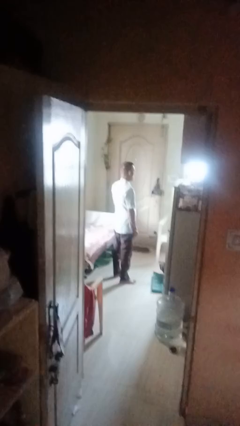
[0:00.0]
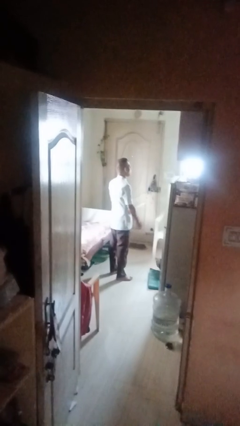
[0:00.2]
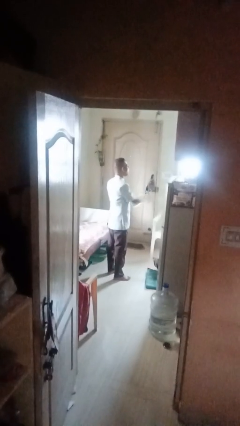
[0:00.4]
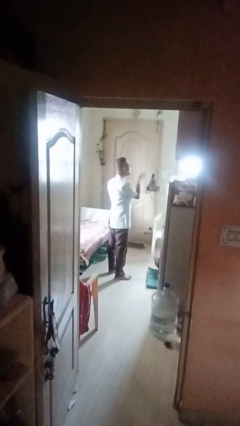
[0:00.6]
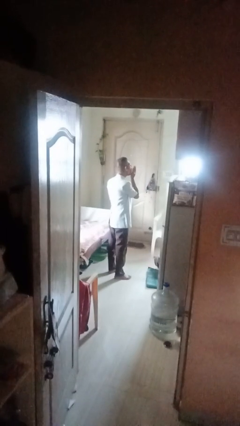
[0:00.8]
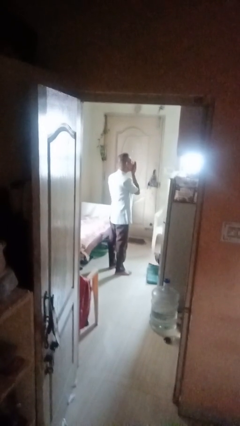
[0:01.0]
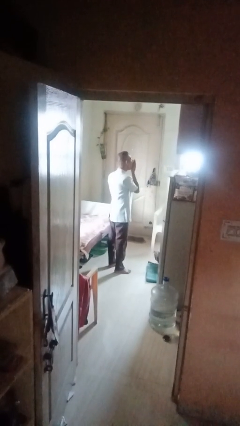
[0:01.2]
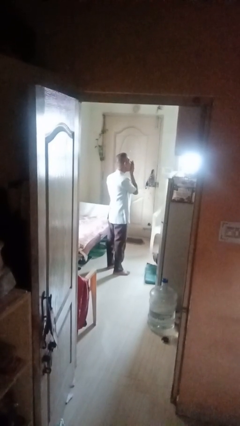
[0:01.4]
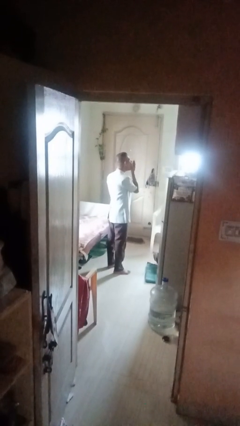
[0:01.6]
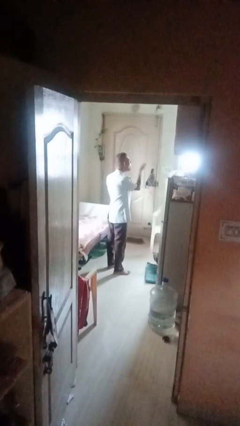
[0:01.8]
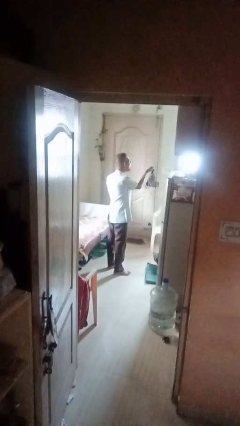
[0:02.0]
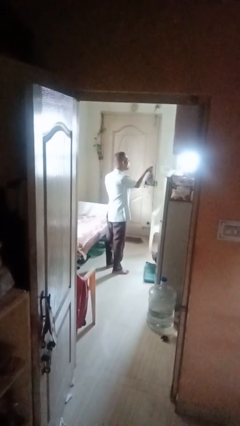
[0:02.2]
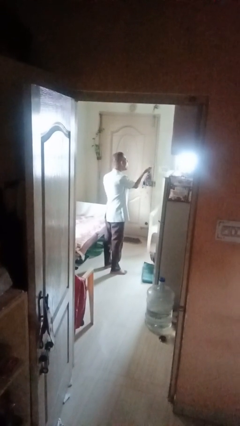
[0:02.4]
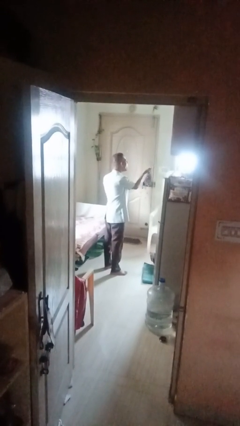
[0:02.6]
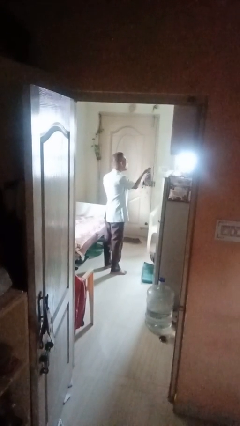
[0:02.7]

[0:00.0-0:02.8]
person gestures blow kiss

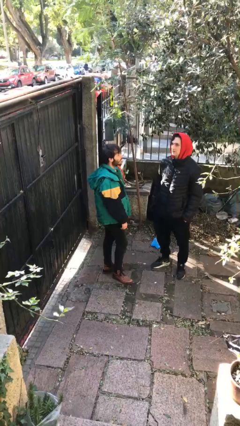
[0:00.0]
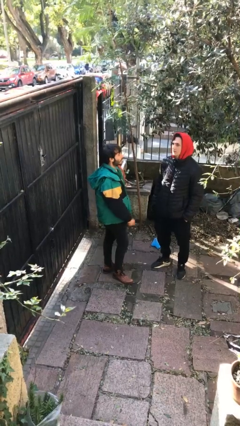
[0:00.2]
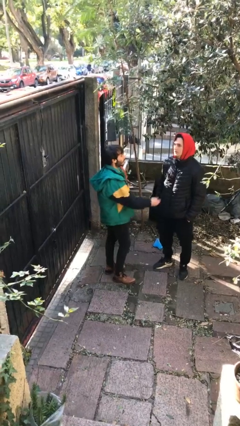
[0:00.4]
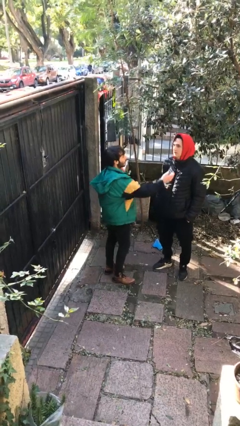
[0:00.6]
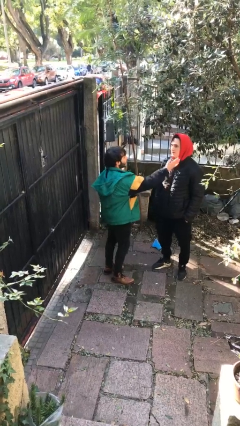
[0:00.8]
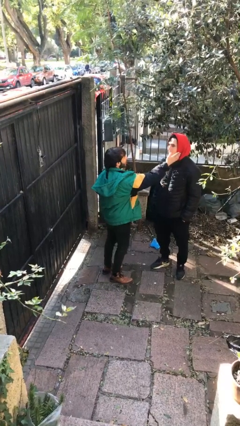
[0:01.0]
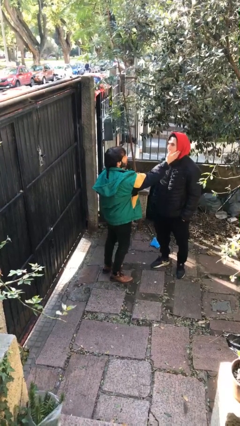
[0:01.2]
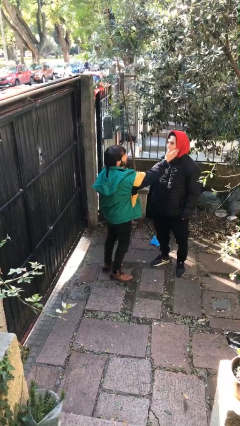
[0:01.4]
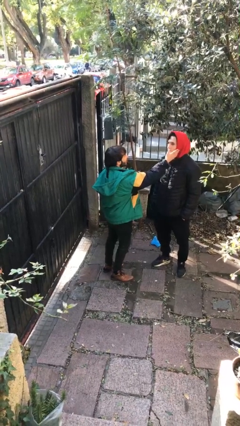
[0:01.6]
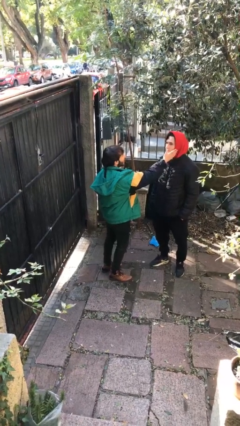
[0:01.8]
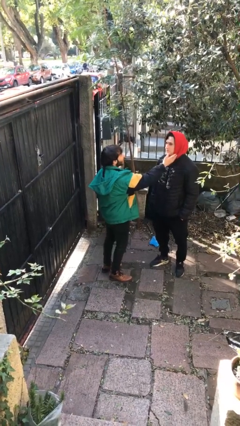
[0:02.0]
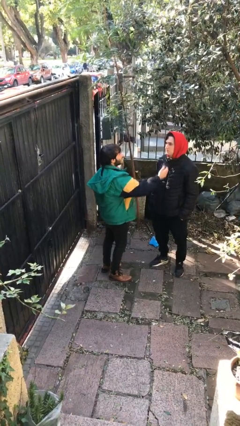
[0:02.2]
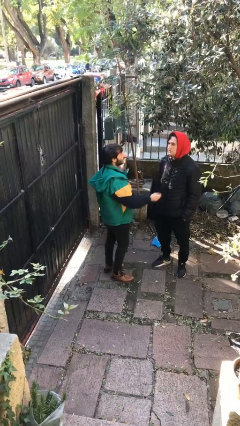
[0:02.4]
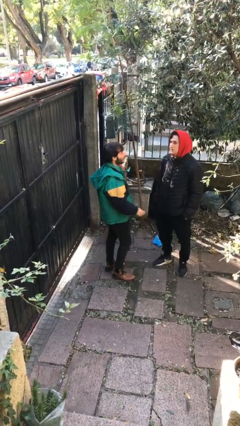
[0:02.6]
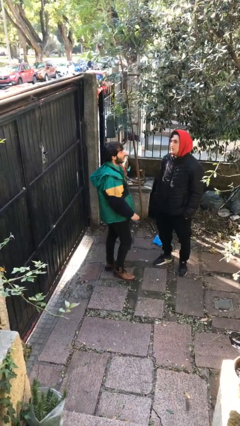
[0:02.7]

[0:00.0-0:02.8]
person touches face of person

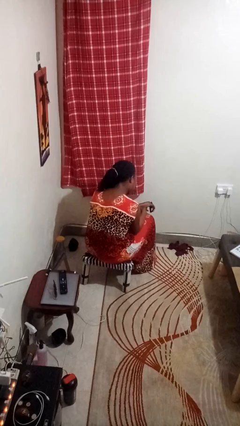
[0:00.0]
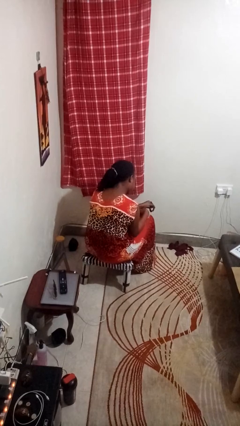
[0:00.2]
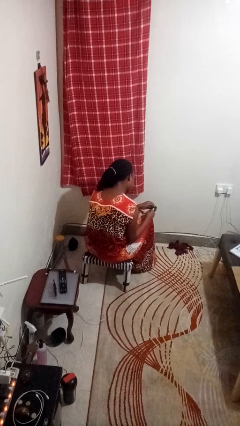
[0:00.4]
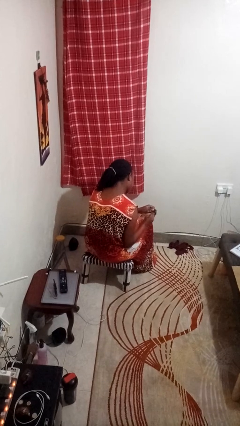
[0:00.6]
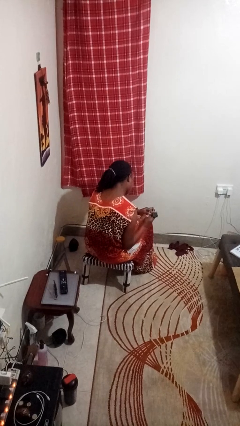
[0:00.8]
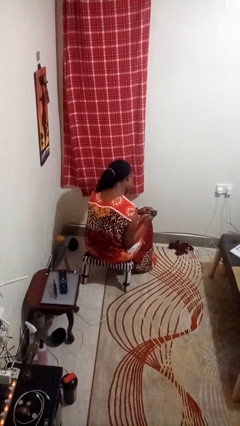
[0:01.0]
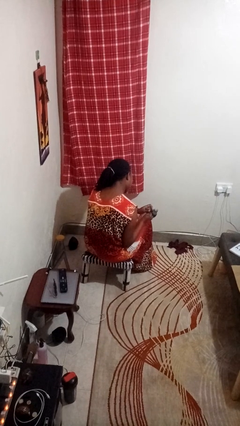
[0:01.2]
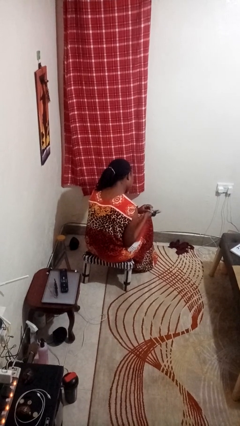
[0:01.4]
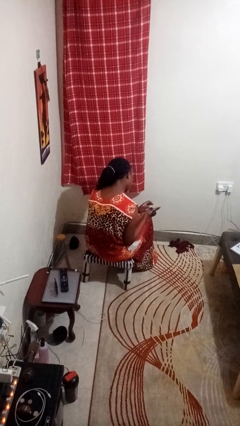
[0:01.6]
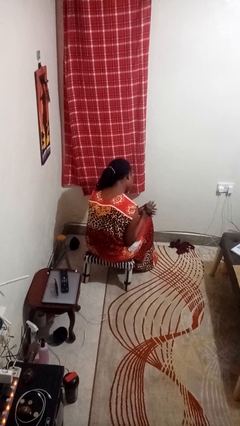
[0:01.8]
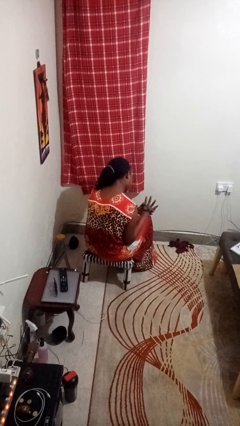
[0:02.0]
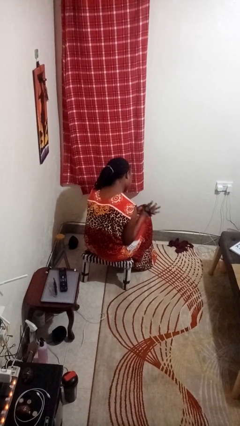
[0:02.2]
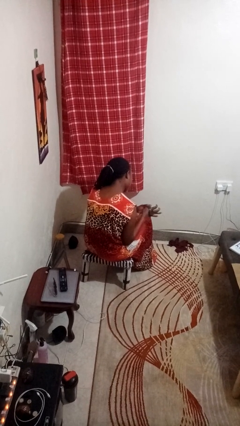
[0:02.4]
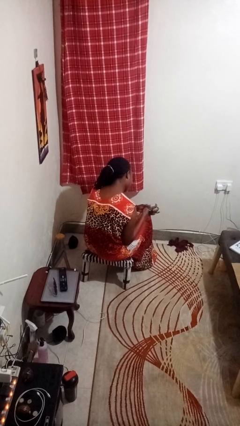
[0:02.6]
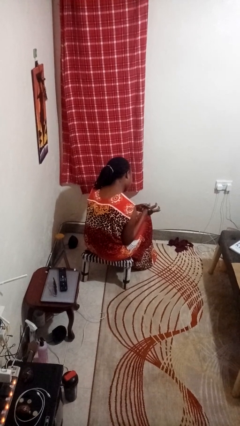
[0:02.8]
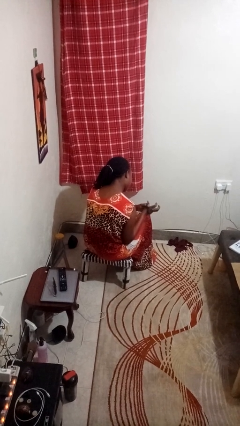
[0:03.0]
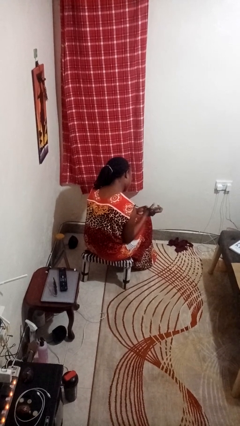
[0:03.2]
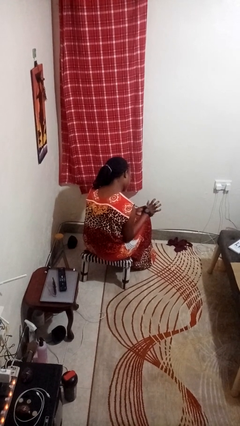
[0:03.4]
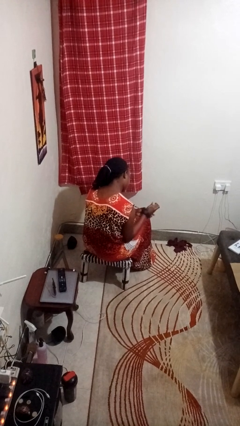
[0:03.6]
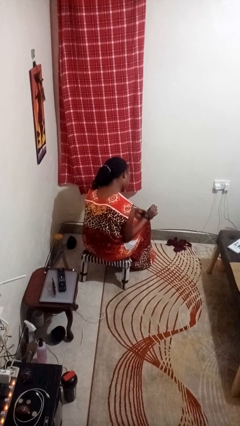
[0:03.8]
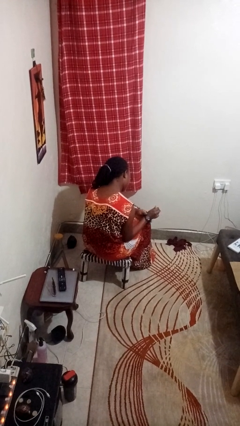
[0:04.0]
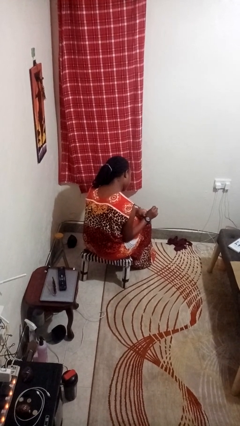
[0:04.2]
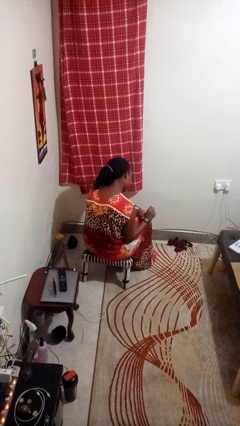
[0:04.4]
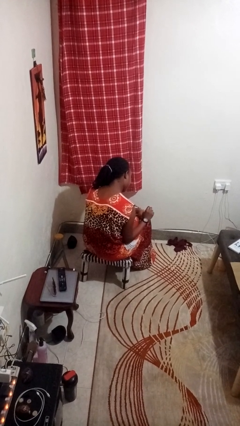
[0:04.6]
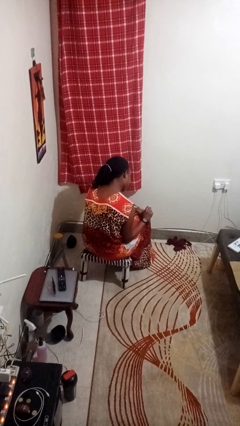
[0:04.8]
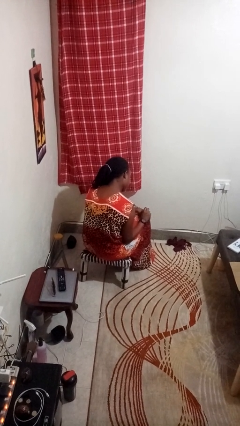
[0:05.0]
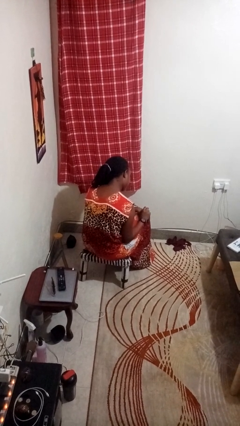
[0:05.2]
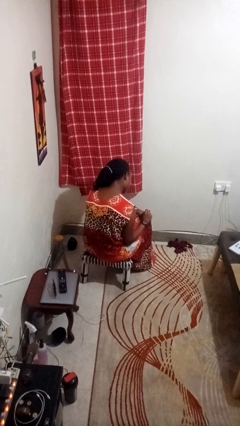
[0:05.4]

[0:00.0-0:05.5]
person puts on wristwatch

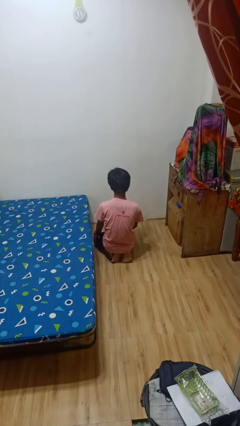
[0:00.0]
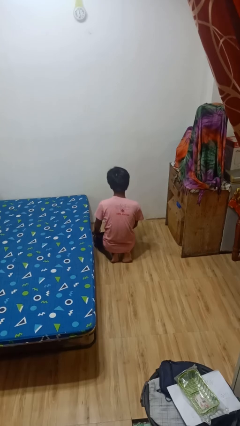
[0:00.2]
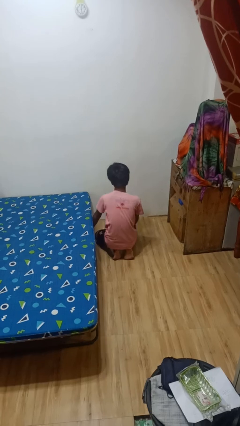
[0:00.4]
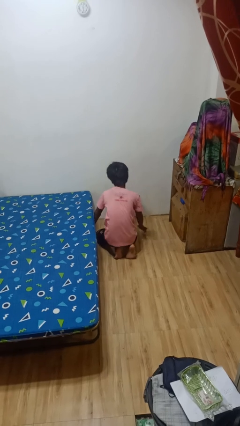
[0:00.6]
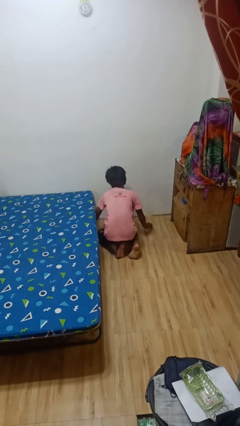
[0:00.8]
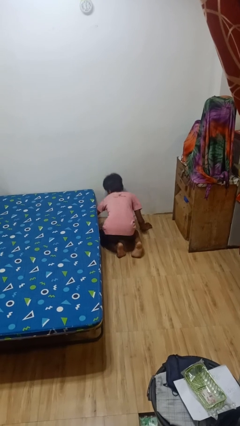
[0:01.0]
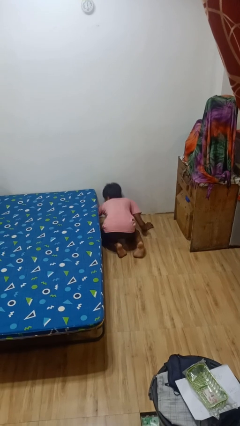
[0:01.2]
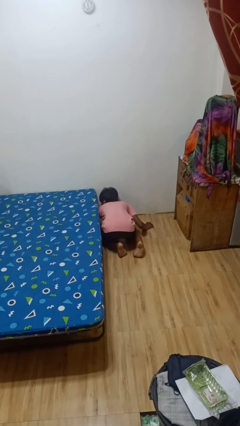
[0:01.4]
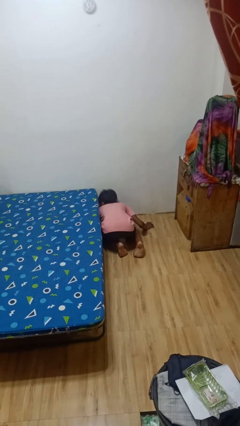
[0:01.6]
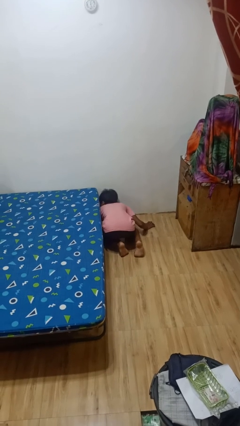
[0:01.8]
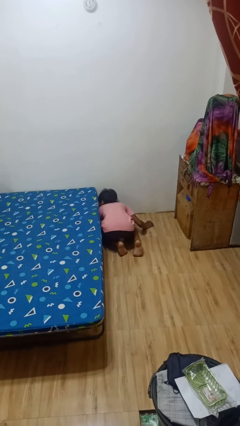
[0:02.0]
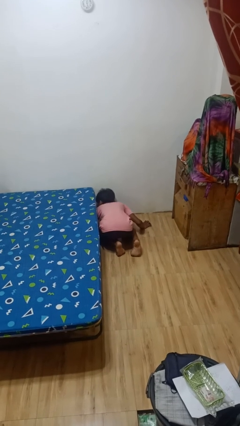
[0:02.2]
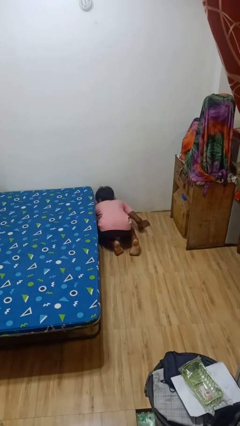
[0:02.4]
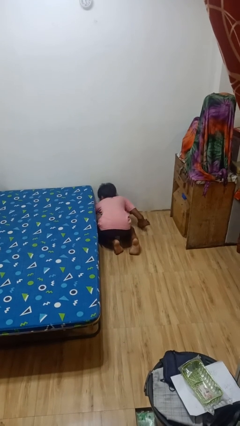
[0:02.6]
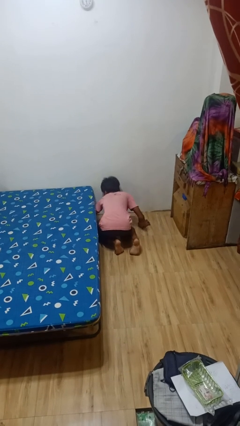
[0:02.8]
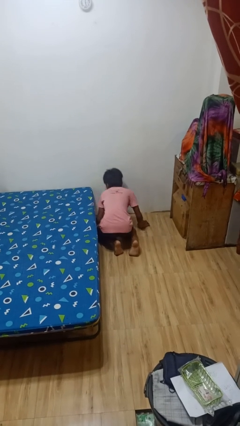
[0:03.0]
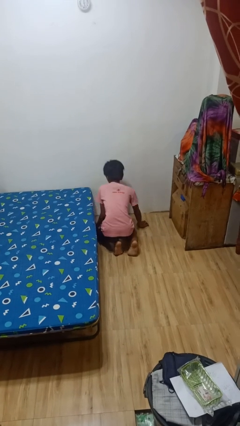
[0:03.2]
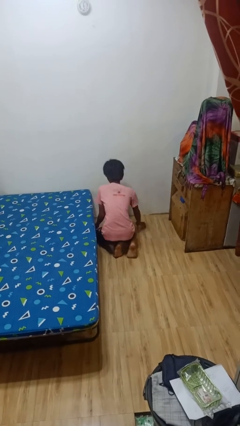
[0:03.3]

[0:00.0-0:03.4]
person searches under bed

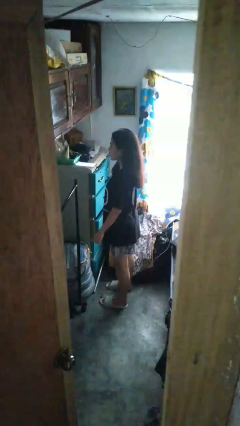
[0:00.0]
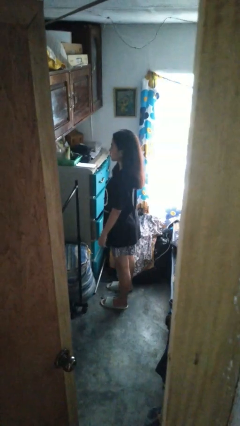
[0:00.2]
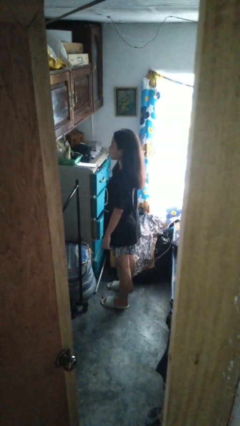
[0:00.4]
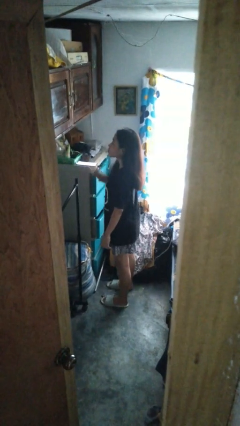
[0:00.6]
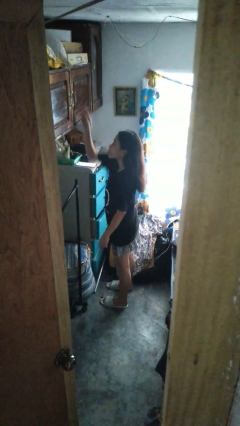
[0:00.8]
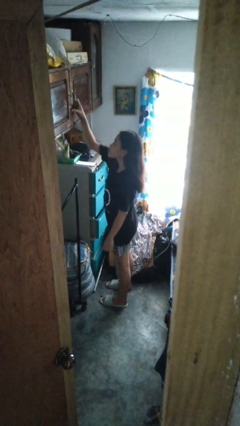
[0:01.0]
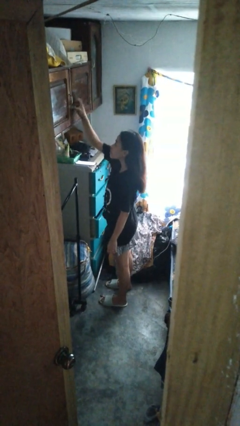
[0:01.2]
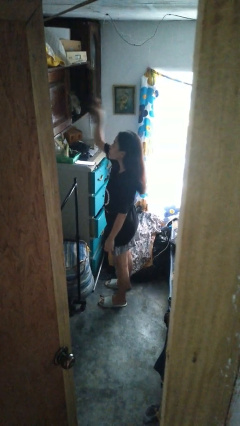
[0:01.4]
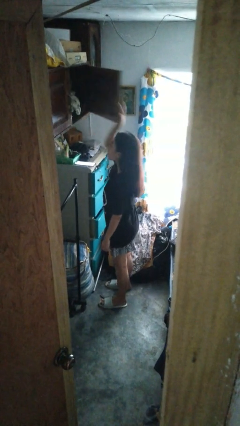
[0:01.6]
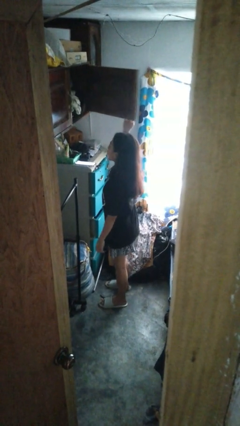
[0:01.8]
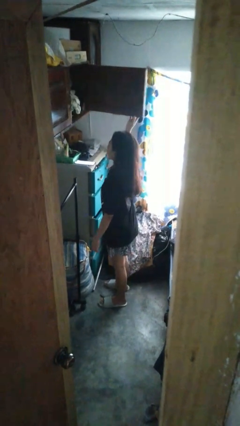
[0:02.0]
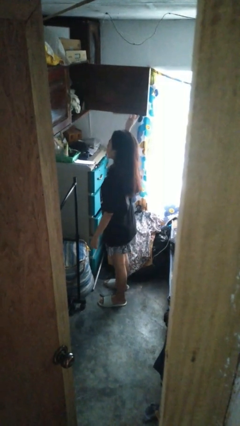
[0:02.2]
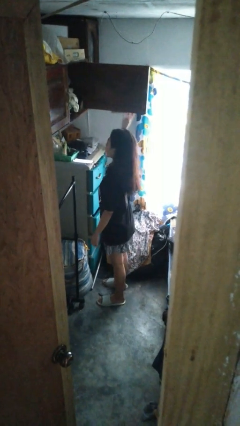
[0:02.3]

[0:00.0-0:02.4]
person opens closet door

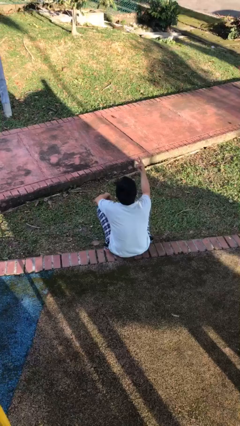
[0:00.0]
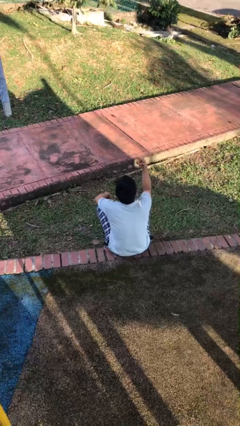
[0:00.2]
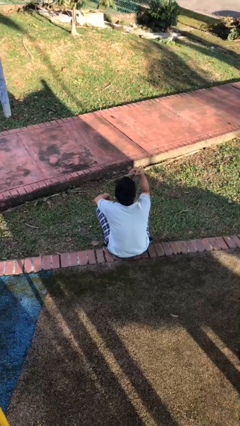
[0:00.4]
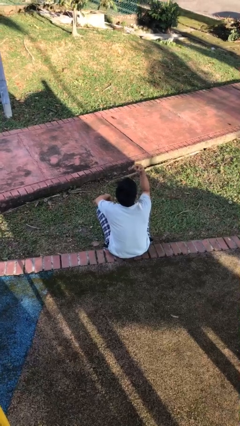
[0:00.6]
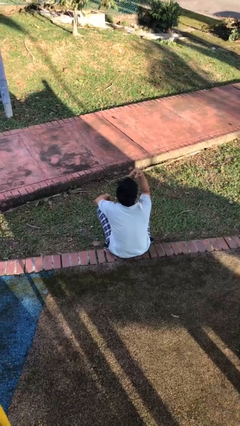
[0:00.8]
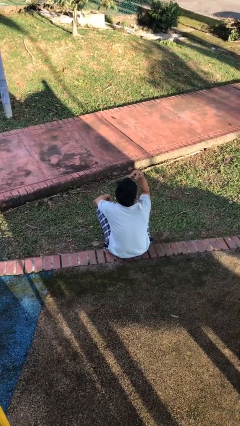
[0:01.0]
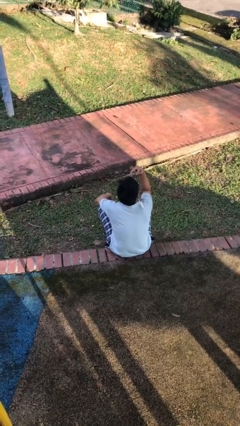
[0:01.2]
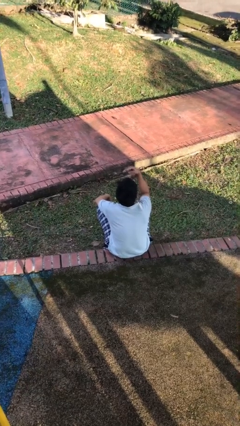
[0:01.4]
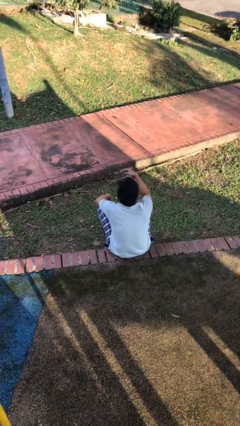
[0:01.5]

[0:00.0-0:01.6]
person gestures watch closely
